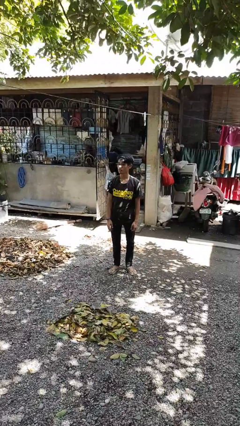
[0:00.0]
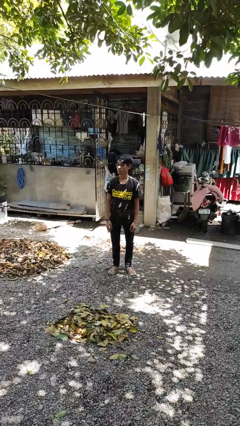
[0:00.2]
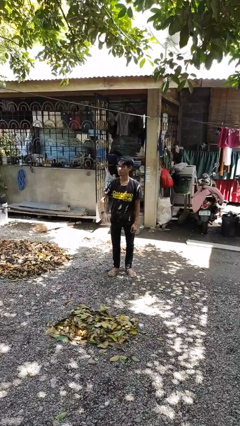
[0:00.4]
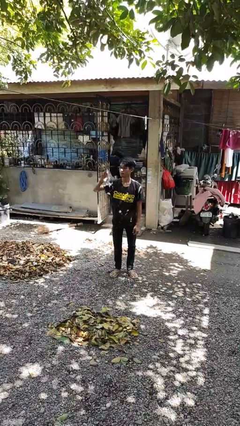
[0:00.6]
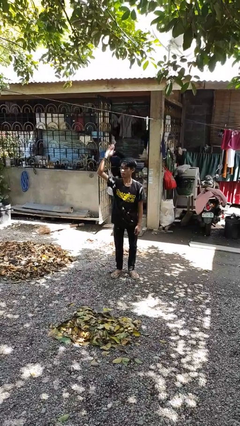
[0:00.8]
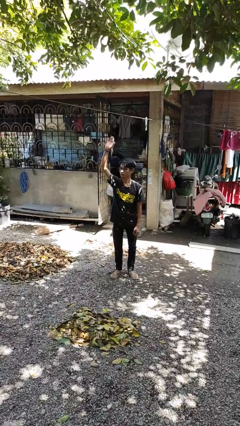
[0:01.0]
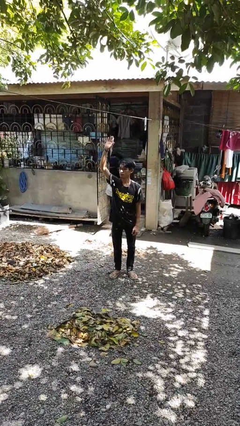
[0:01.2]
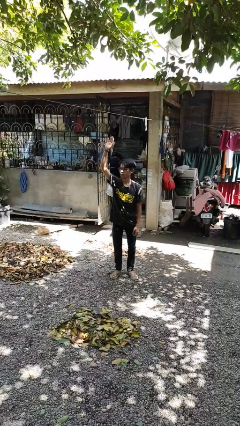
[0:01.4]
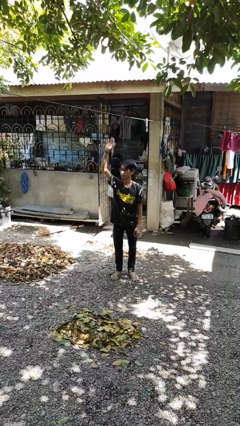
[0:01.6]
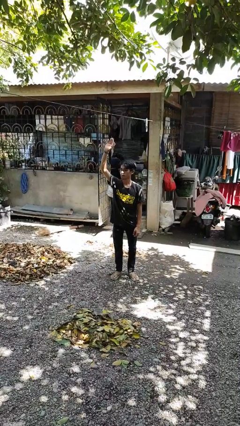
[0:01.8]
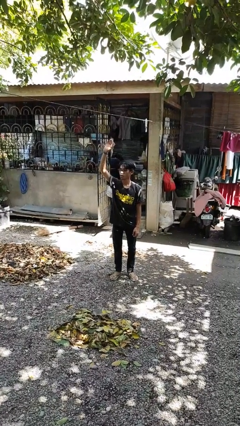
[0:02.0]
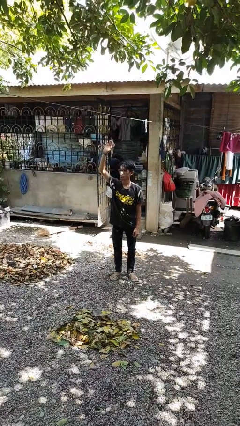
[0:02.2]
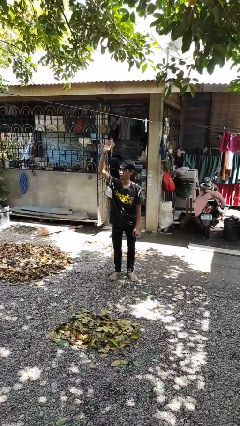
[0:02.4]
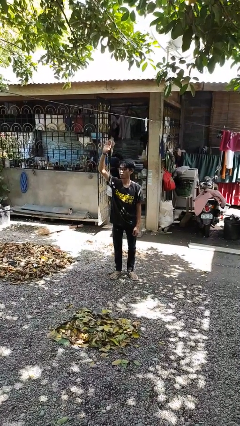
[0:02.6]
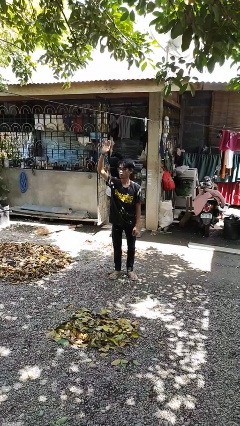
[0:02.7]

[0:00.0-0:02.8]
person gestures raise hand

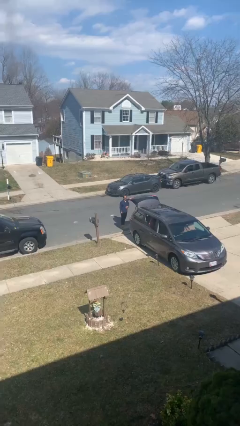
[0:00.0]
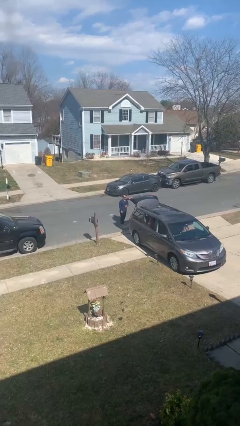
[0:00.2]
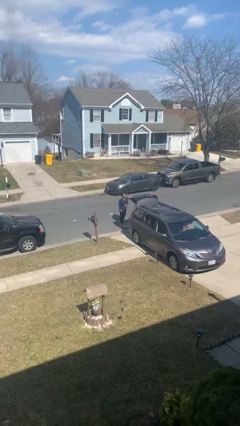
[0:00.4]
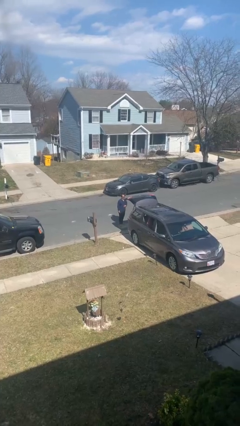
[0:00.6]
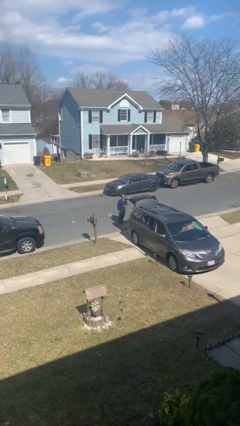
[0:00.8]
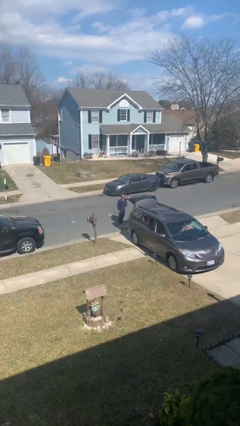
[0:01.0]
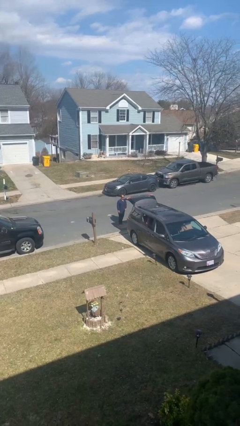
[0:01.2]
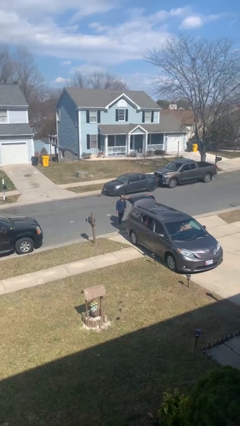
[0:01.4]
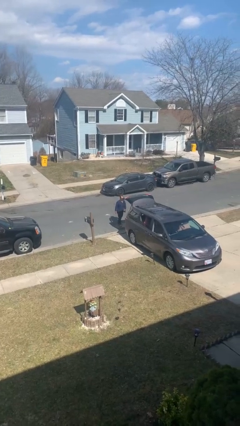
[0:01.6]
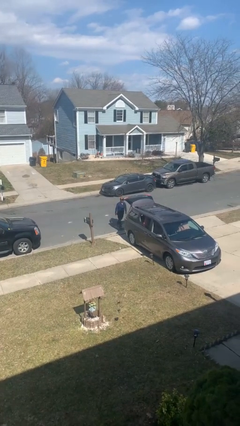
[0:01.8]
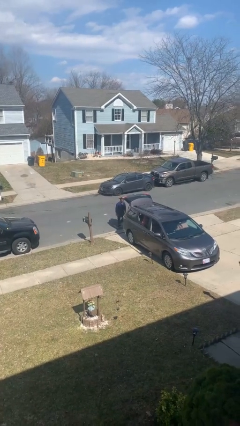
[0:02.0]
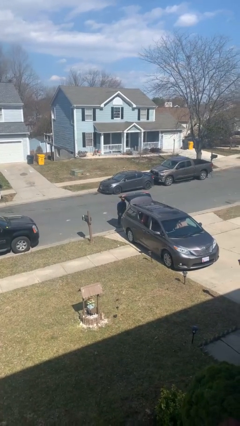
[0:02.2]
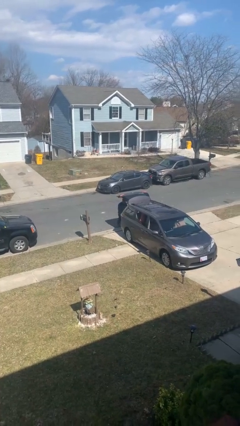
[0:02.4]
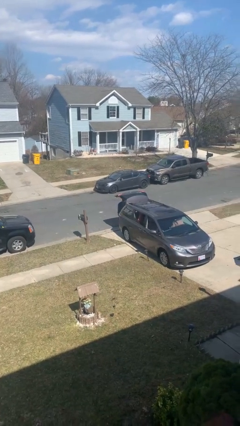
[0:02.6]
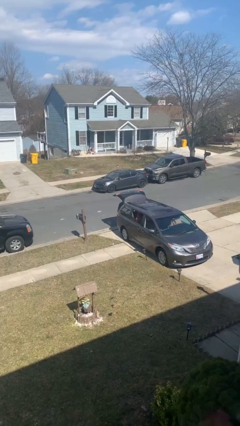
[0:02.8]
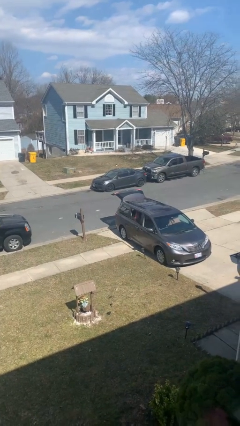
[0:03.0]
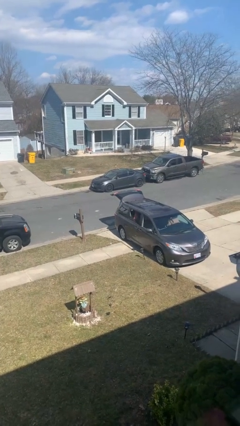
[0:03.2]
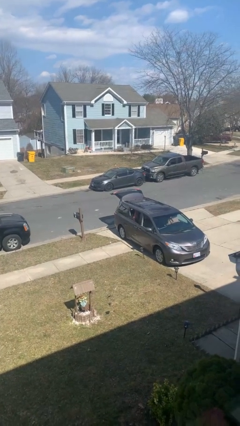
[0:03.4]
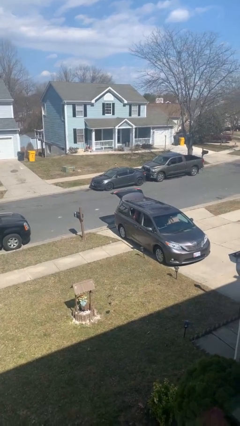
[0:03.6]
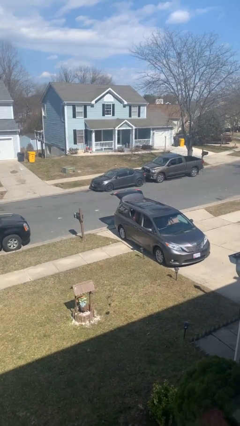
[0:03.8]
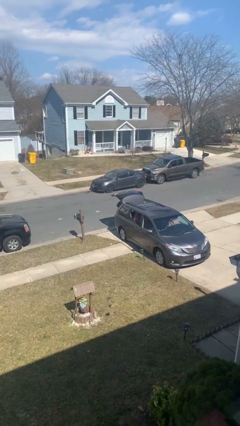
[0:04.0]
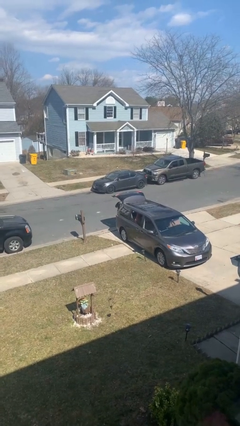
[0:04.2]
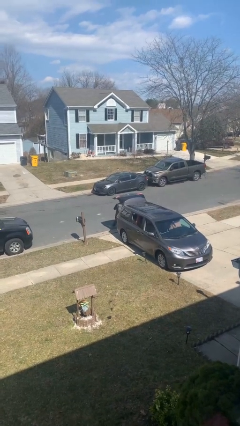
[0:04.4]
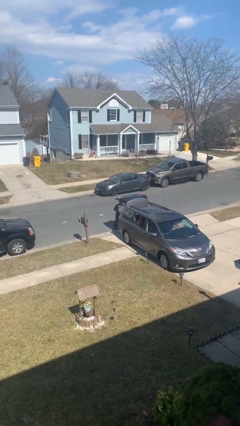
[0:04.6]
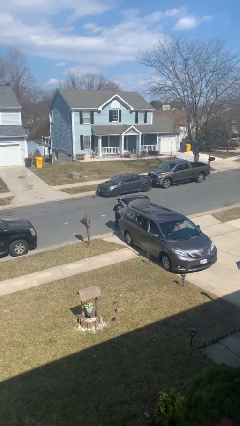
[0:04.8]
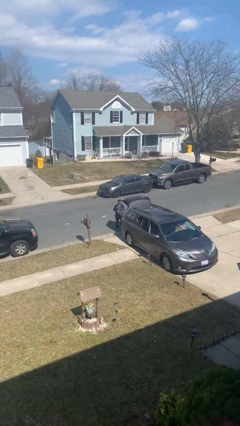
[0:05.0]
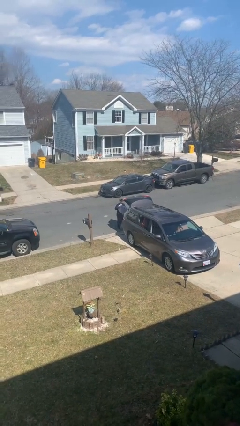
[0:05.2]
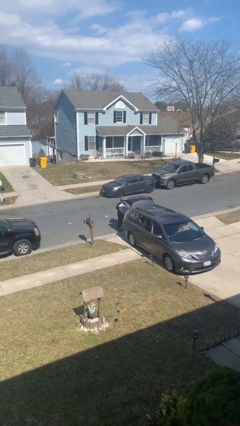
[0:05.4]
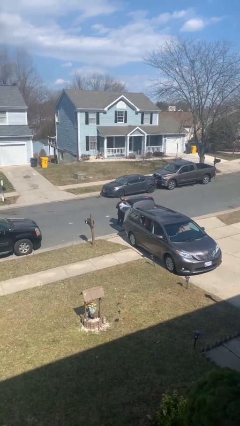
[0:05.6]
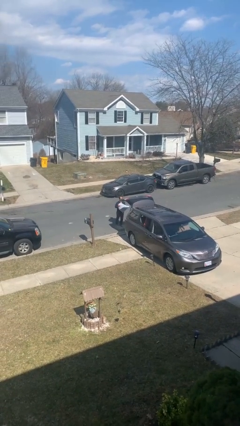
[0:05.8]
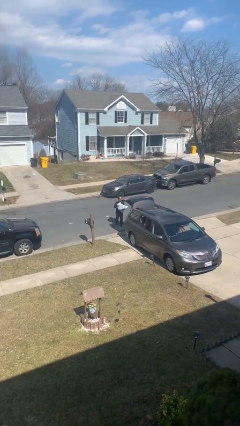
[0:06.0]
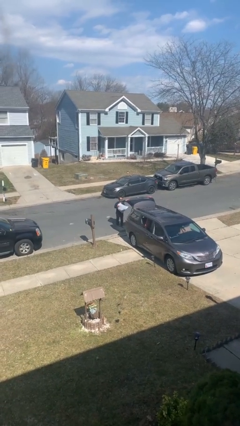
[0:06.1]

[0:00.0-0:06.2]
person unloads car

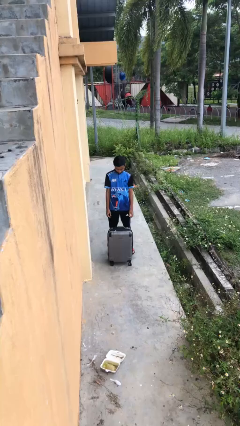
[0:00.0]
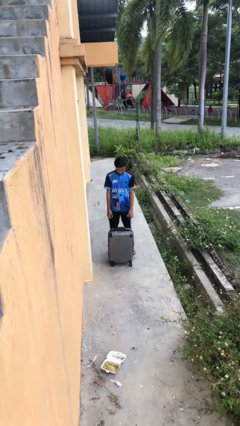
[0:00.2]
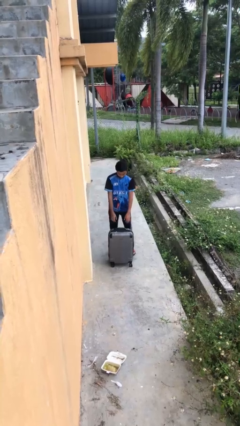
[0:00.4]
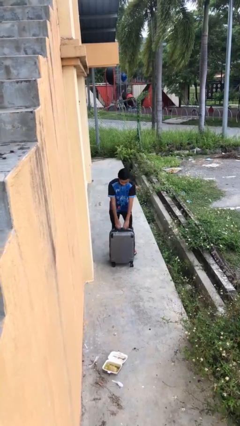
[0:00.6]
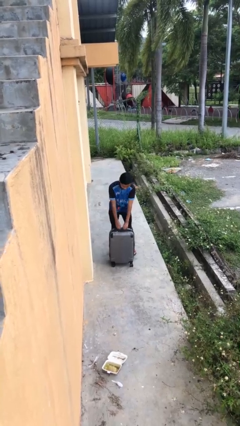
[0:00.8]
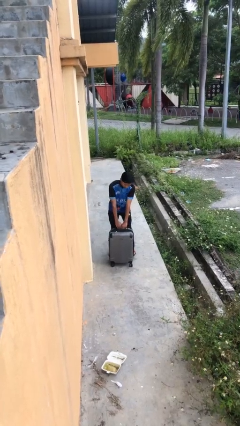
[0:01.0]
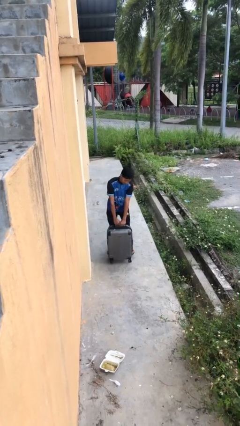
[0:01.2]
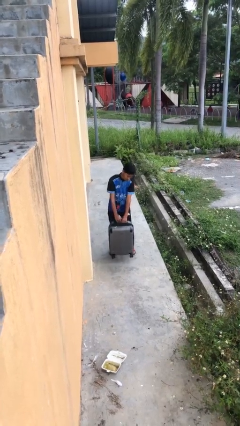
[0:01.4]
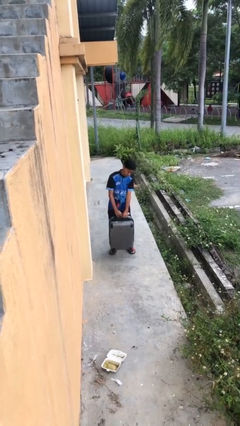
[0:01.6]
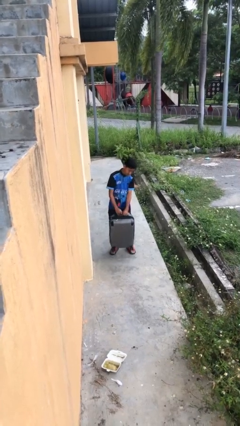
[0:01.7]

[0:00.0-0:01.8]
person picks up object from floor

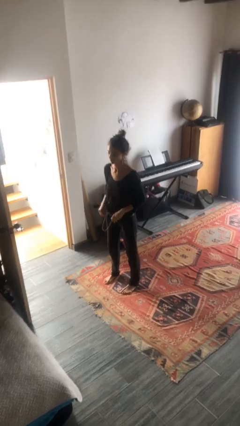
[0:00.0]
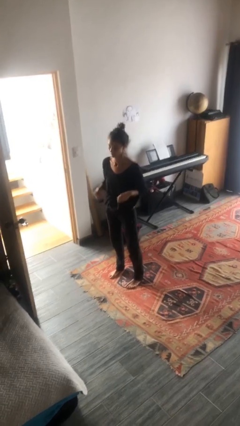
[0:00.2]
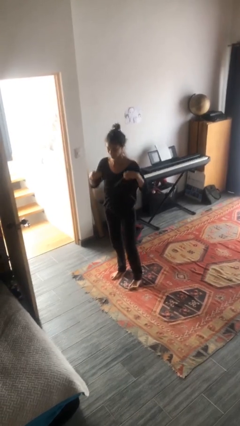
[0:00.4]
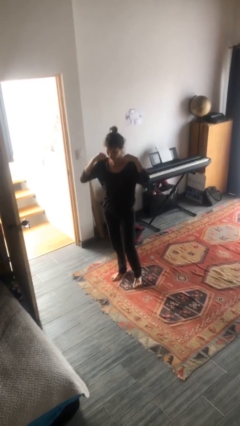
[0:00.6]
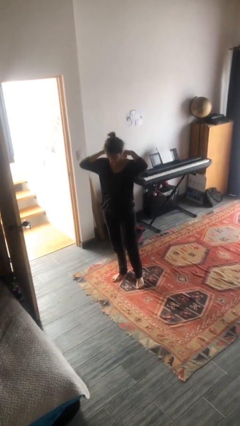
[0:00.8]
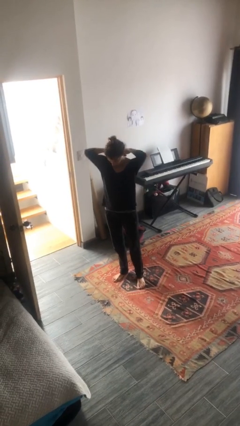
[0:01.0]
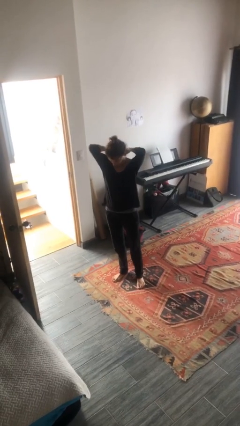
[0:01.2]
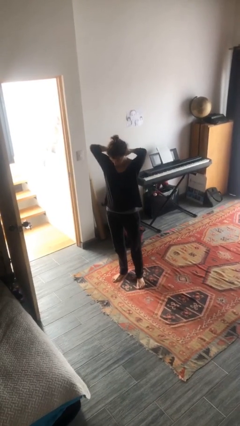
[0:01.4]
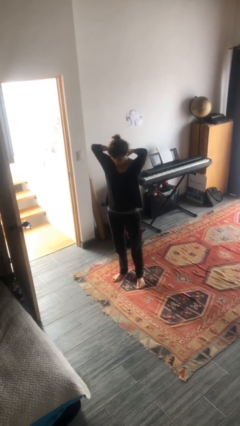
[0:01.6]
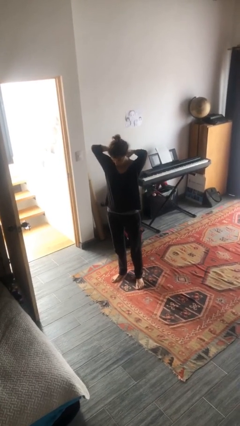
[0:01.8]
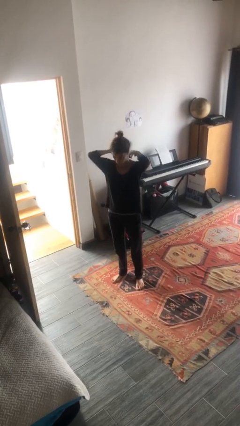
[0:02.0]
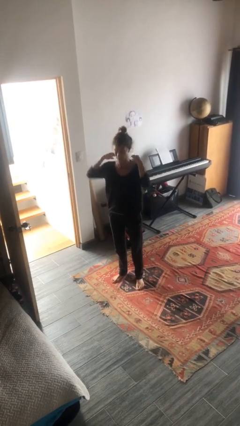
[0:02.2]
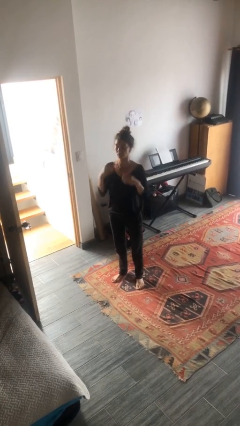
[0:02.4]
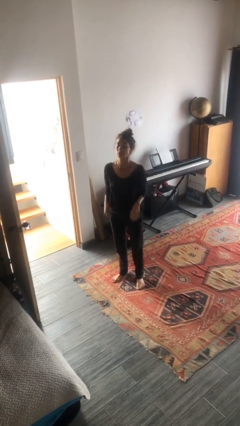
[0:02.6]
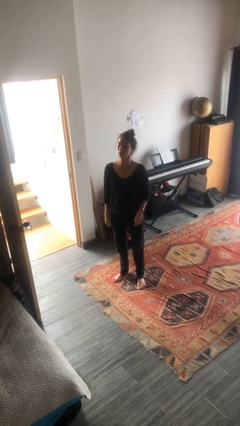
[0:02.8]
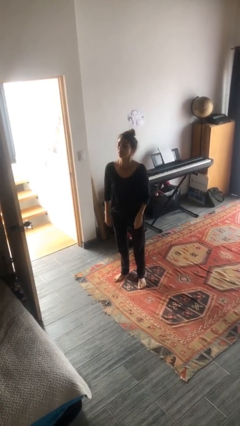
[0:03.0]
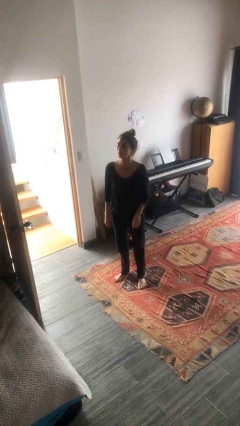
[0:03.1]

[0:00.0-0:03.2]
person puts on necklace

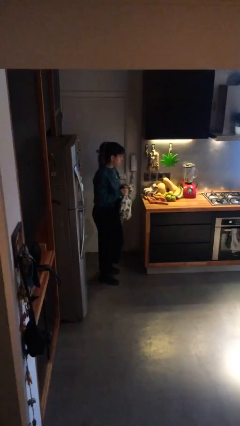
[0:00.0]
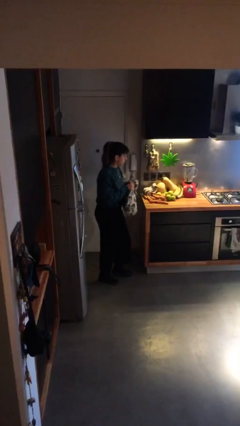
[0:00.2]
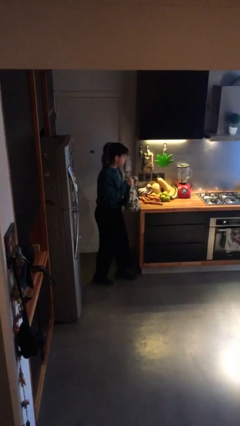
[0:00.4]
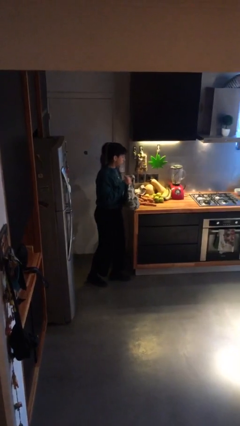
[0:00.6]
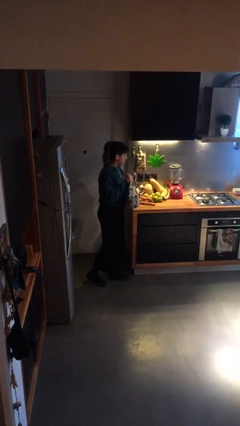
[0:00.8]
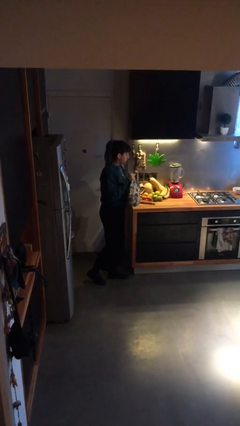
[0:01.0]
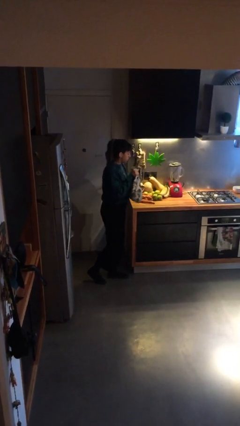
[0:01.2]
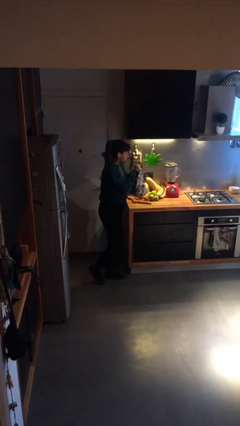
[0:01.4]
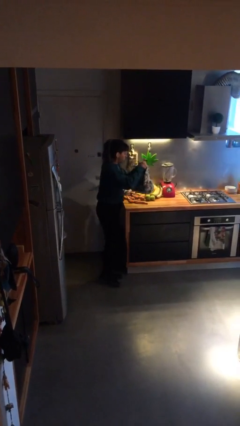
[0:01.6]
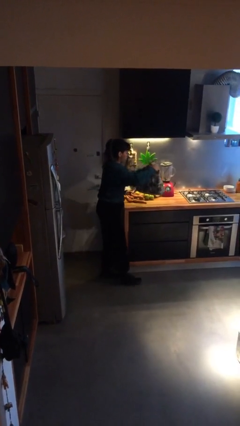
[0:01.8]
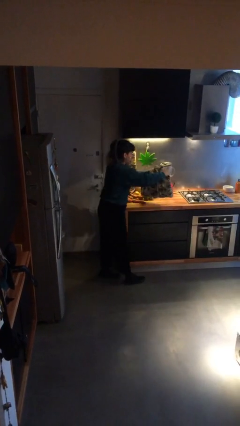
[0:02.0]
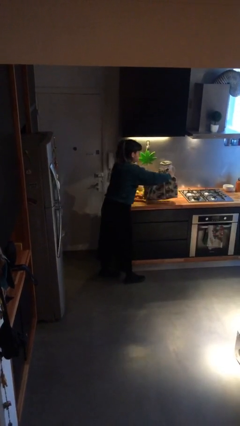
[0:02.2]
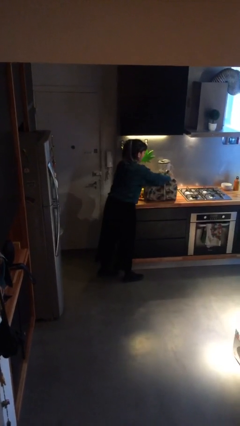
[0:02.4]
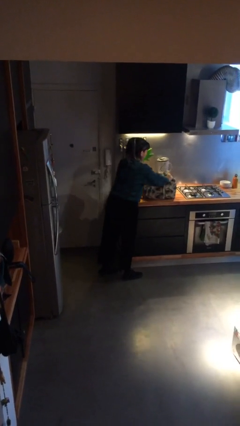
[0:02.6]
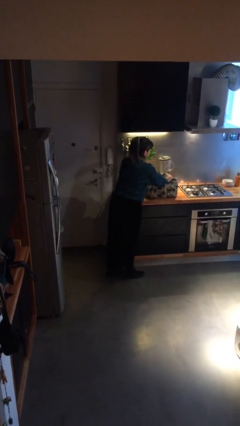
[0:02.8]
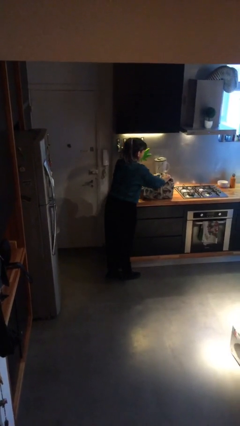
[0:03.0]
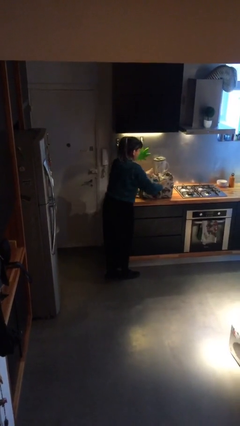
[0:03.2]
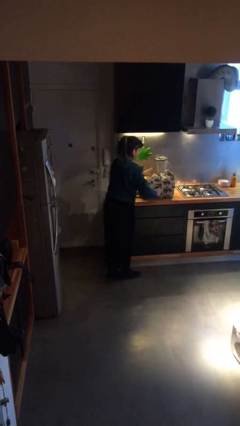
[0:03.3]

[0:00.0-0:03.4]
person puts down object on table
